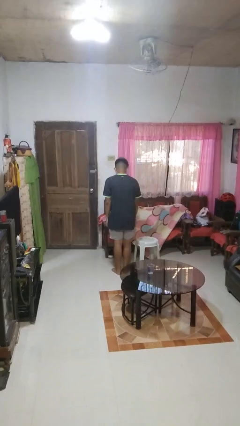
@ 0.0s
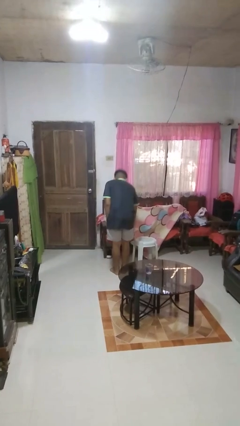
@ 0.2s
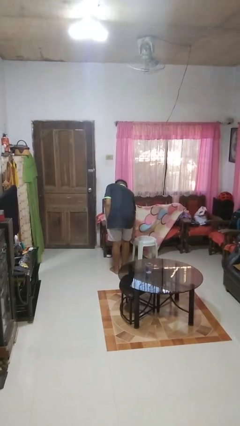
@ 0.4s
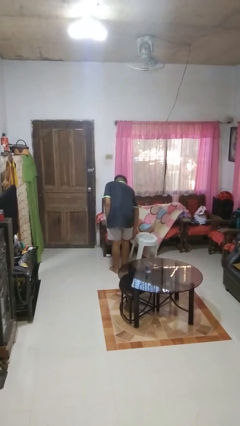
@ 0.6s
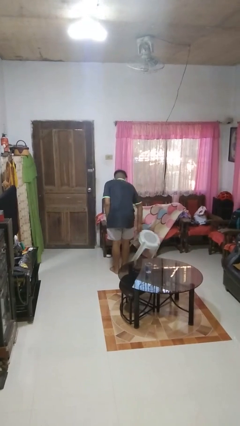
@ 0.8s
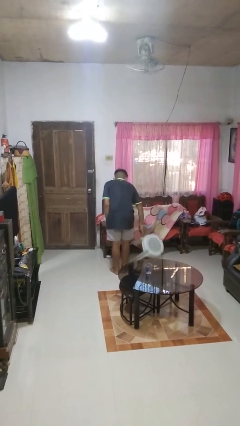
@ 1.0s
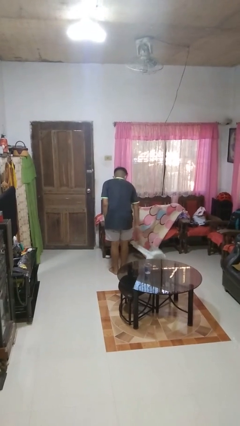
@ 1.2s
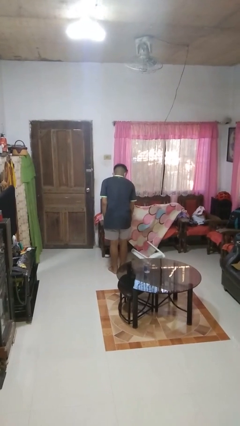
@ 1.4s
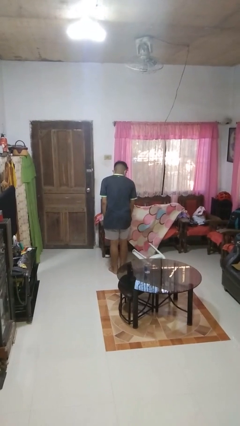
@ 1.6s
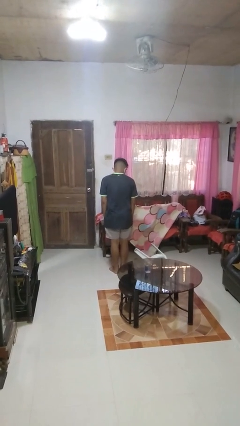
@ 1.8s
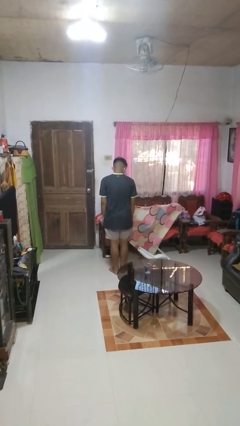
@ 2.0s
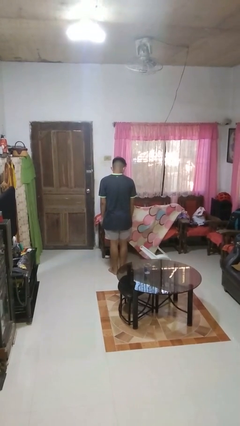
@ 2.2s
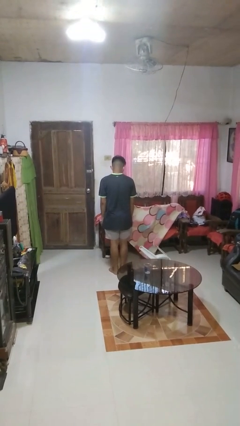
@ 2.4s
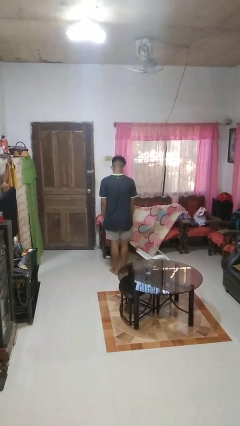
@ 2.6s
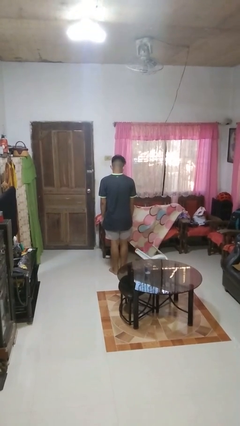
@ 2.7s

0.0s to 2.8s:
person knocks over furniture

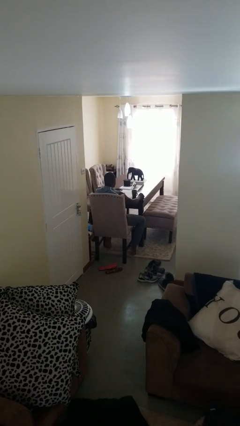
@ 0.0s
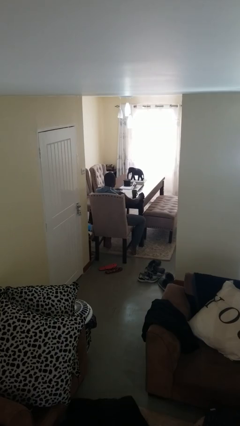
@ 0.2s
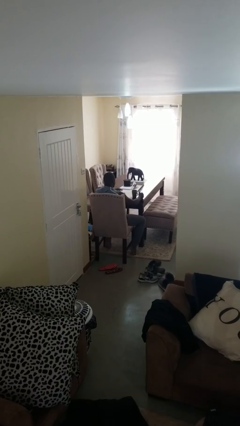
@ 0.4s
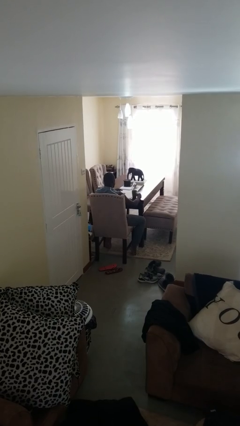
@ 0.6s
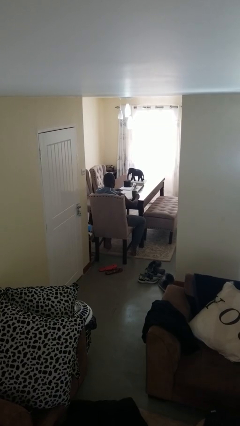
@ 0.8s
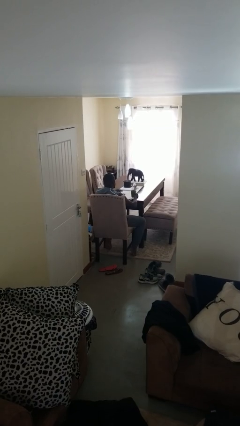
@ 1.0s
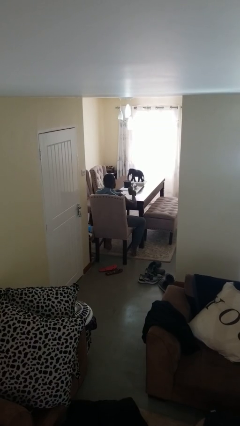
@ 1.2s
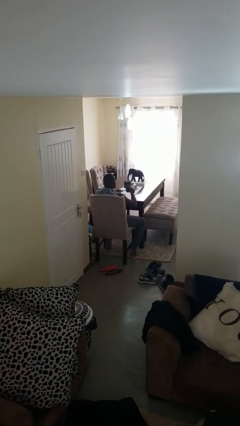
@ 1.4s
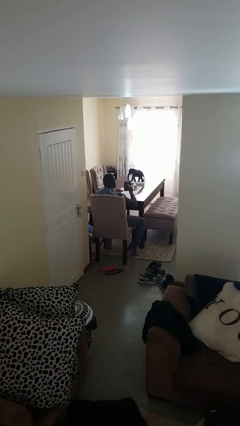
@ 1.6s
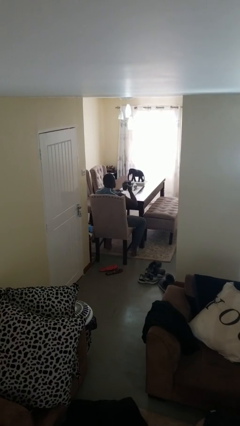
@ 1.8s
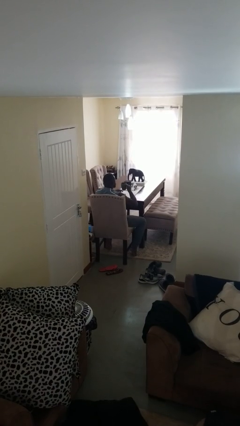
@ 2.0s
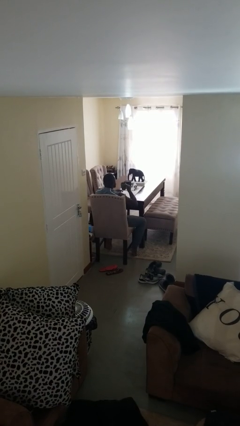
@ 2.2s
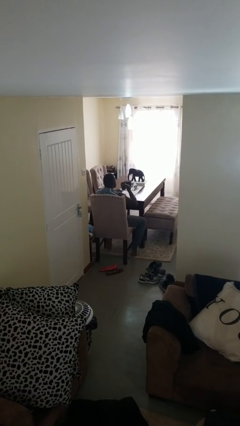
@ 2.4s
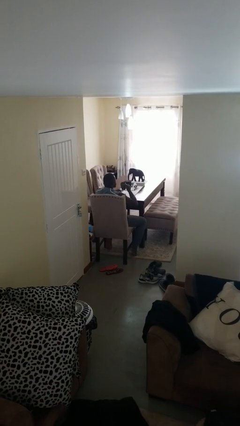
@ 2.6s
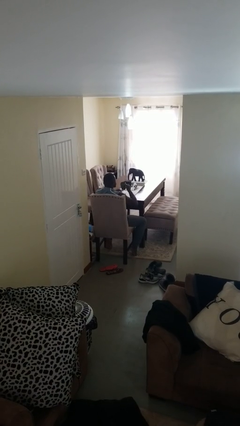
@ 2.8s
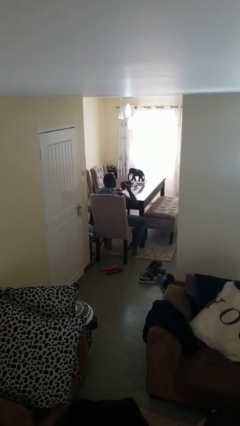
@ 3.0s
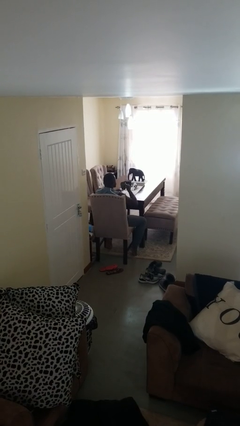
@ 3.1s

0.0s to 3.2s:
person picks up object from table

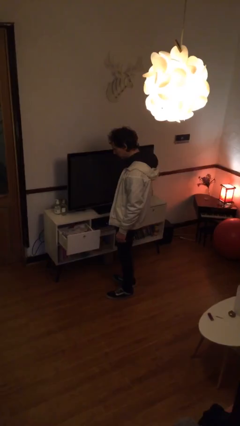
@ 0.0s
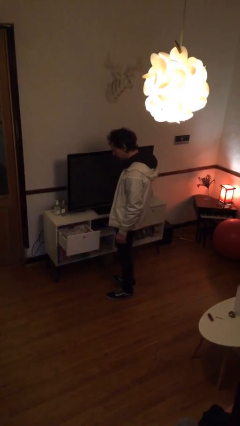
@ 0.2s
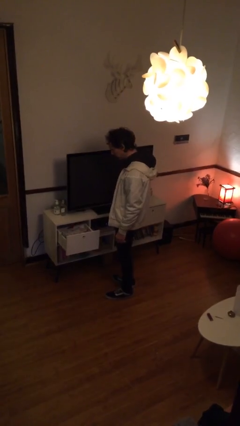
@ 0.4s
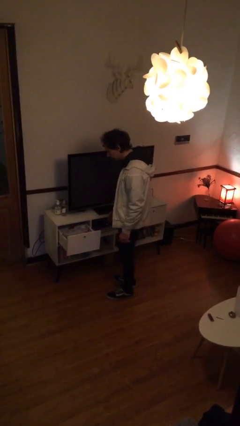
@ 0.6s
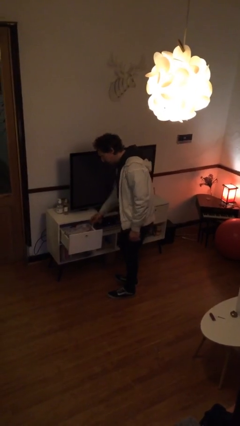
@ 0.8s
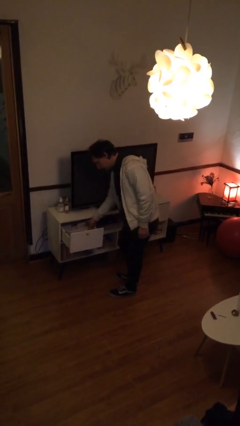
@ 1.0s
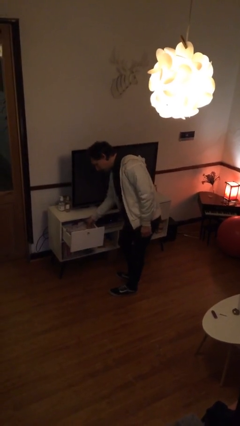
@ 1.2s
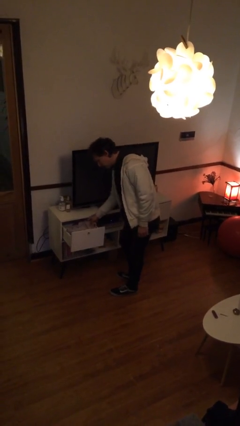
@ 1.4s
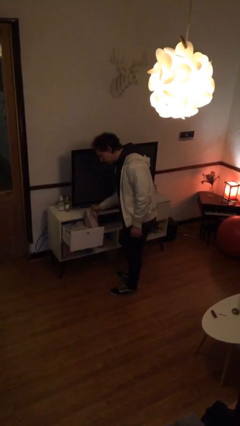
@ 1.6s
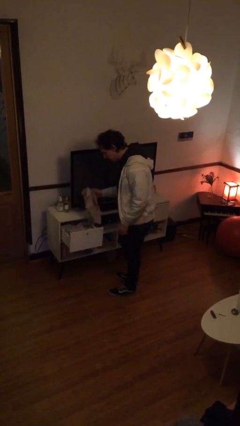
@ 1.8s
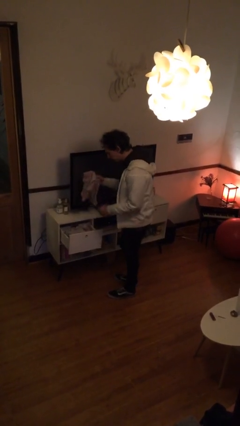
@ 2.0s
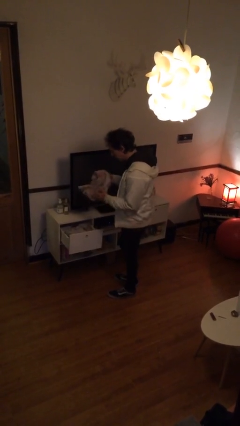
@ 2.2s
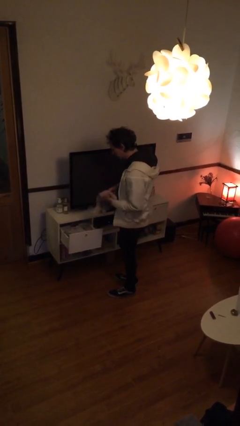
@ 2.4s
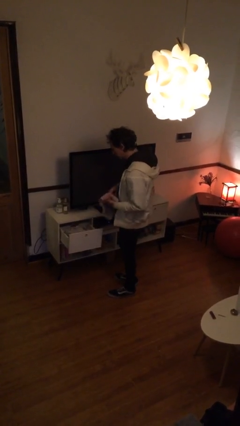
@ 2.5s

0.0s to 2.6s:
person takes clothes from dresser

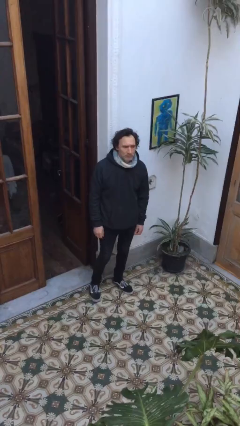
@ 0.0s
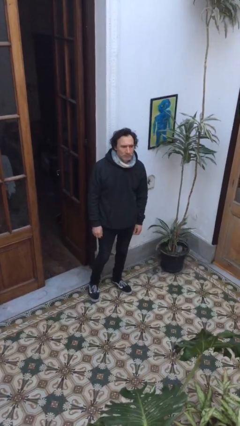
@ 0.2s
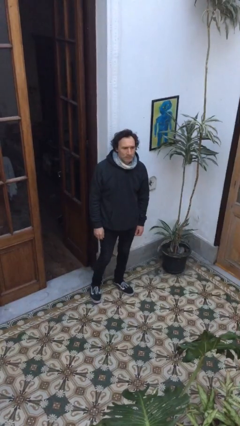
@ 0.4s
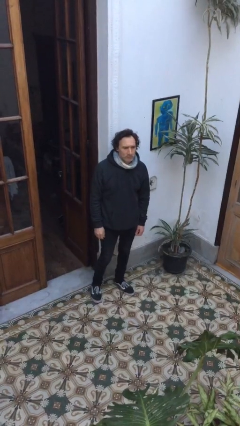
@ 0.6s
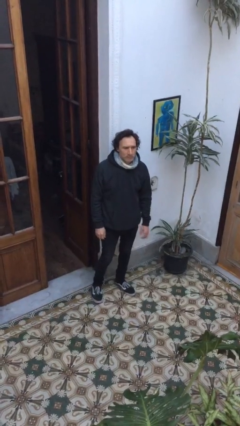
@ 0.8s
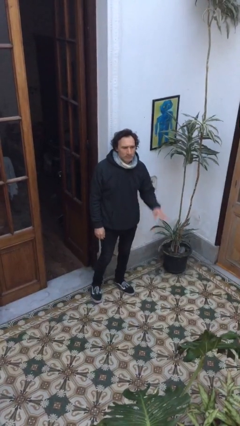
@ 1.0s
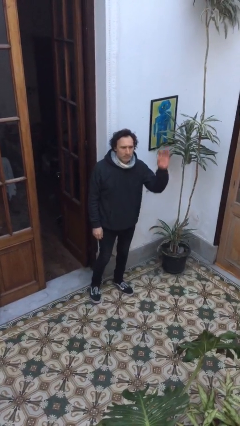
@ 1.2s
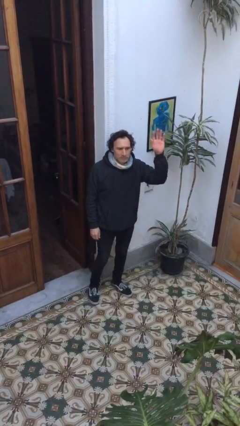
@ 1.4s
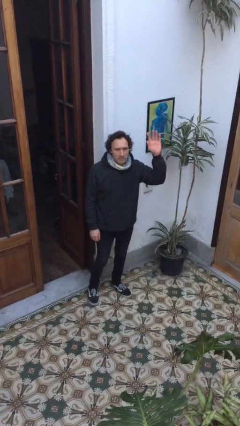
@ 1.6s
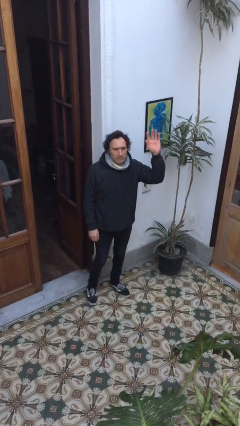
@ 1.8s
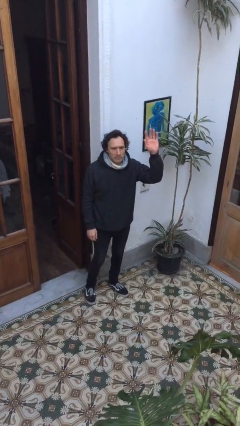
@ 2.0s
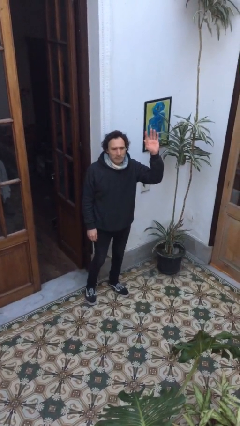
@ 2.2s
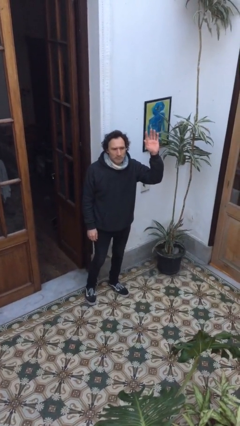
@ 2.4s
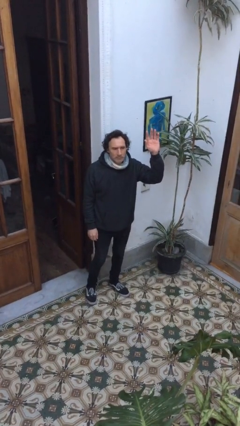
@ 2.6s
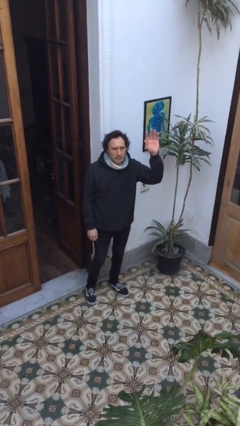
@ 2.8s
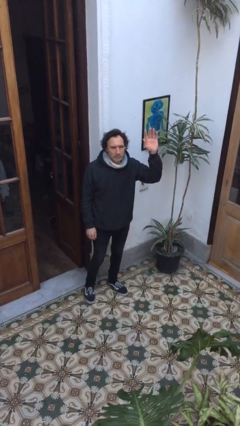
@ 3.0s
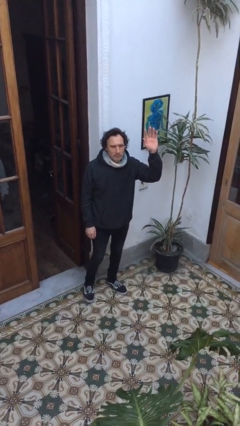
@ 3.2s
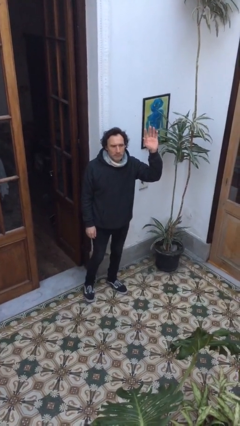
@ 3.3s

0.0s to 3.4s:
person gestures raise hand

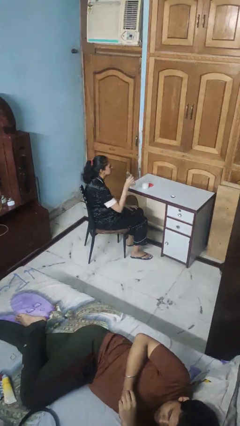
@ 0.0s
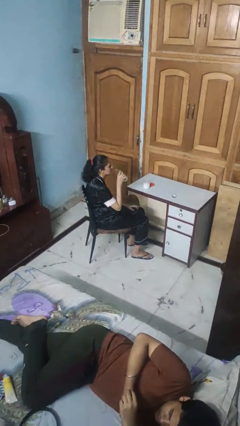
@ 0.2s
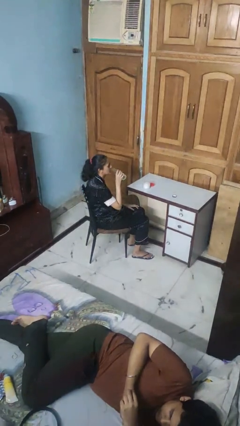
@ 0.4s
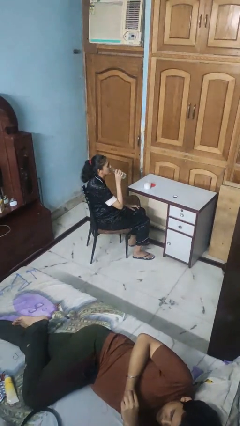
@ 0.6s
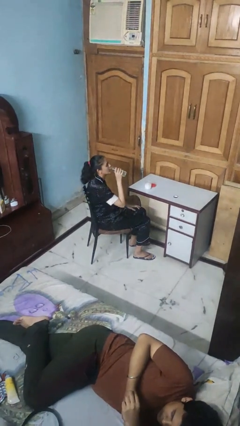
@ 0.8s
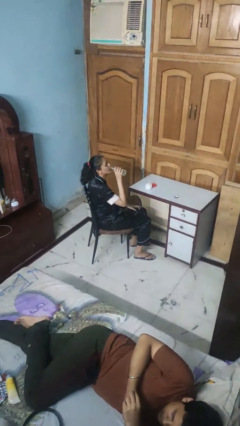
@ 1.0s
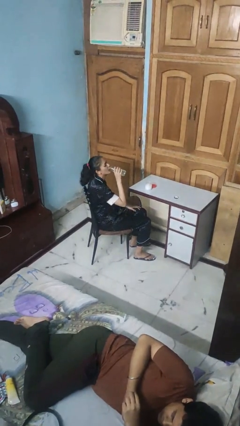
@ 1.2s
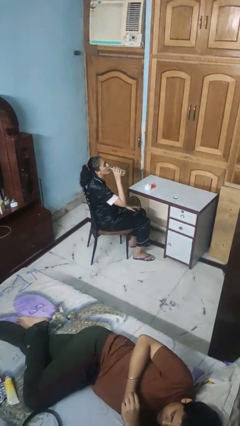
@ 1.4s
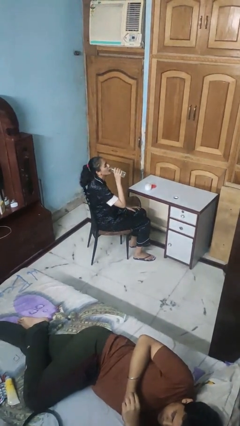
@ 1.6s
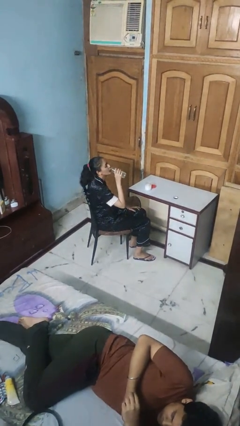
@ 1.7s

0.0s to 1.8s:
person drinks from cup

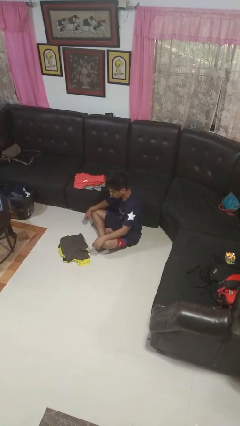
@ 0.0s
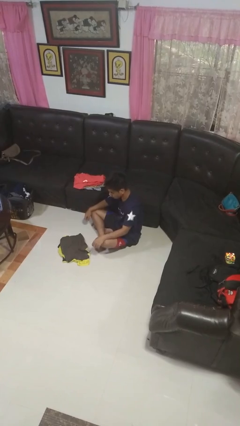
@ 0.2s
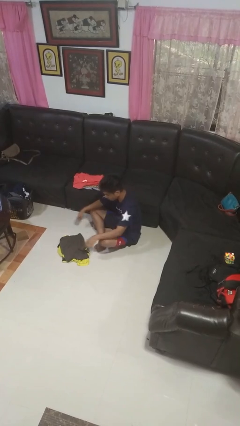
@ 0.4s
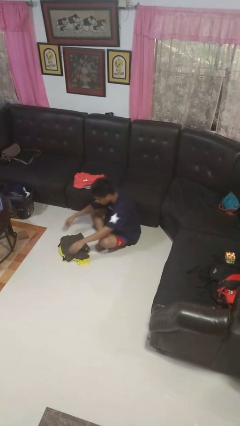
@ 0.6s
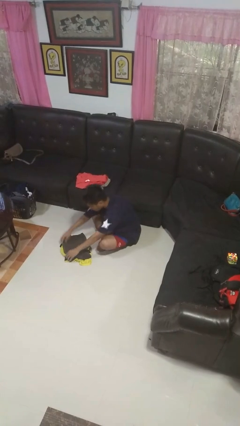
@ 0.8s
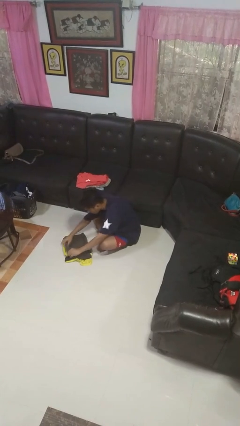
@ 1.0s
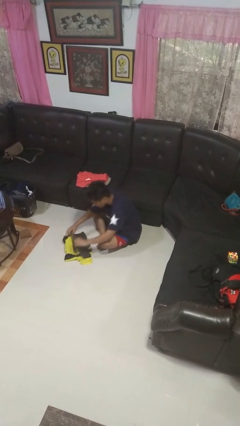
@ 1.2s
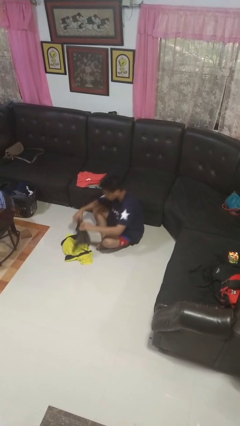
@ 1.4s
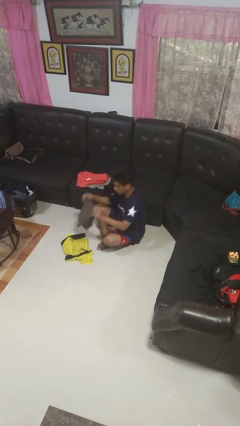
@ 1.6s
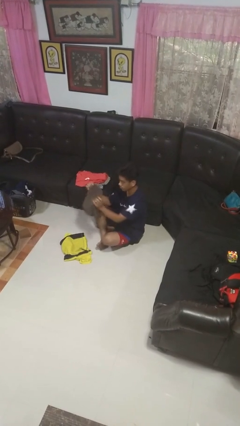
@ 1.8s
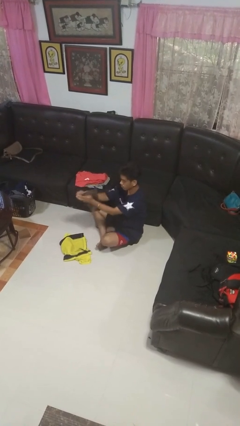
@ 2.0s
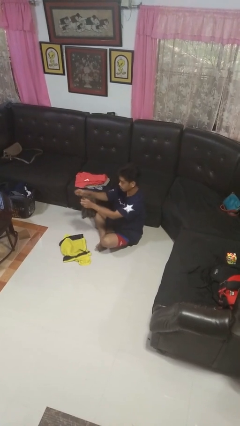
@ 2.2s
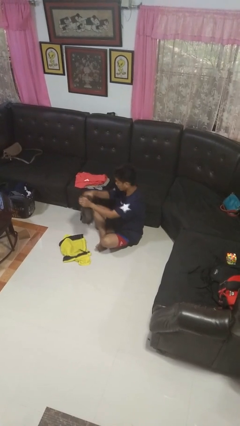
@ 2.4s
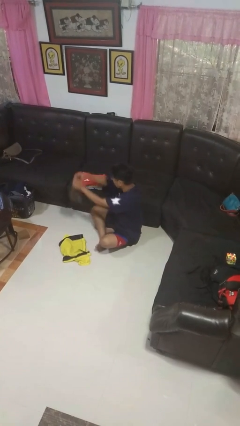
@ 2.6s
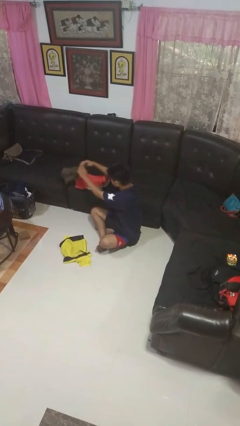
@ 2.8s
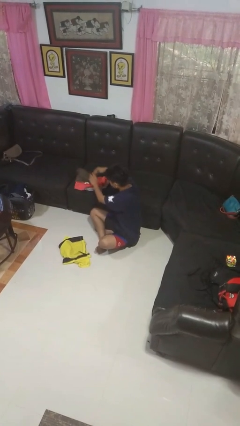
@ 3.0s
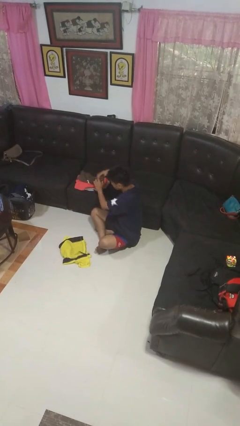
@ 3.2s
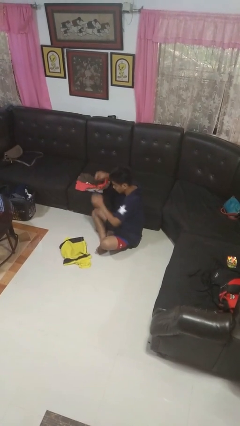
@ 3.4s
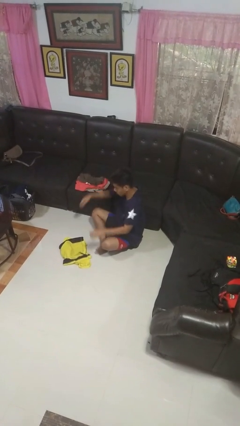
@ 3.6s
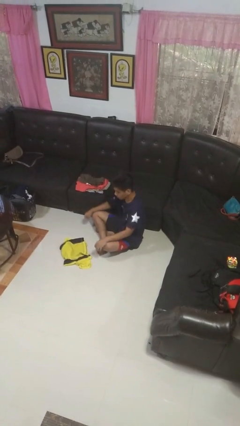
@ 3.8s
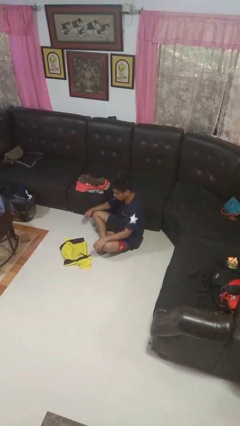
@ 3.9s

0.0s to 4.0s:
person folds shirt
